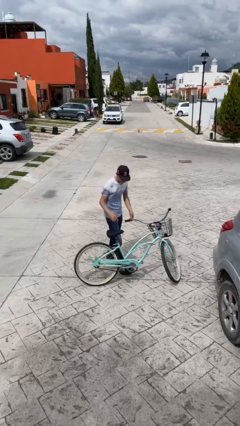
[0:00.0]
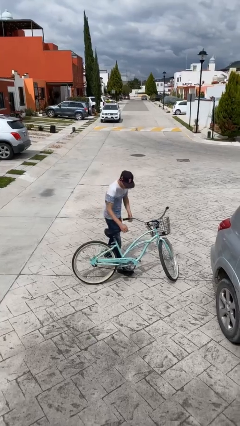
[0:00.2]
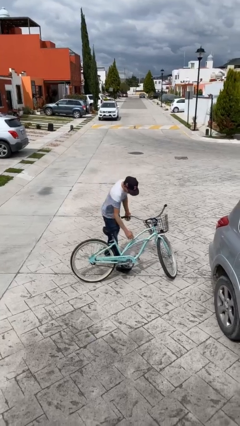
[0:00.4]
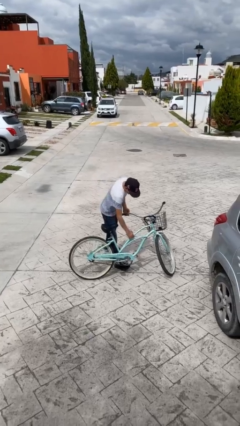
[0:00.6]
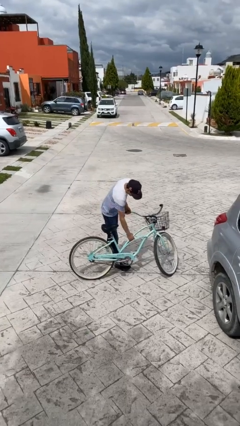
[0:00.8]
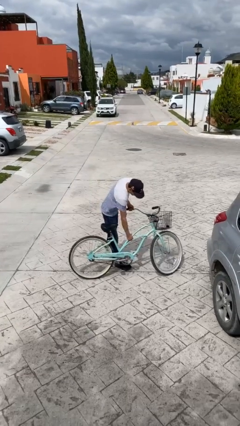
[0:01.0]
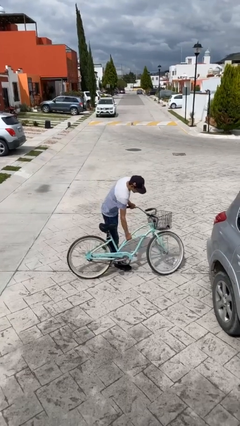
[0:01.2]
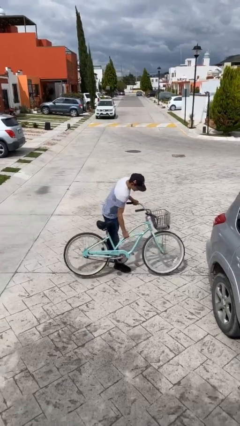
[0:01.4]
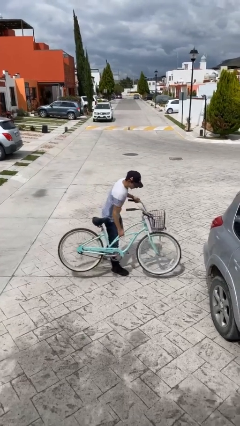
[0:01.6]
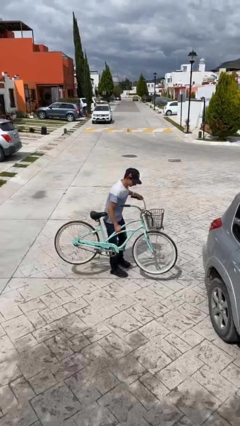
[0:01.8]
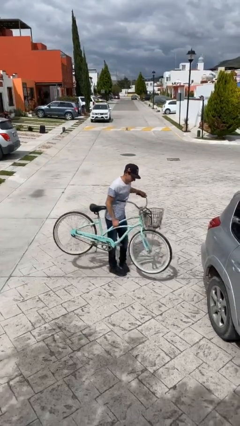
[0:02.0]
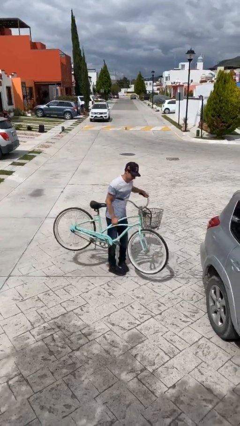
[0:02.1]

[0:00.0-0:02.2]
person picks up object from floor

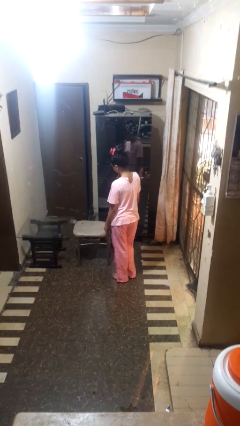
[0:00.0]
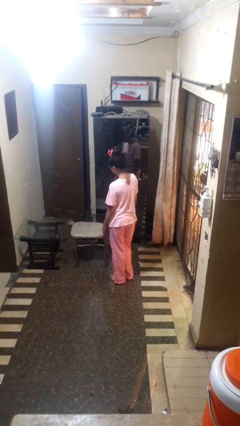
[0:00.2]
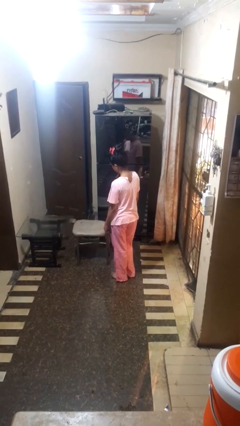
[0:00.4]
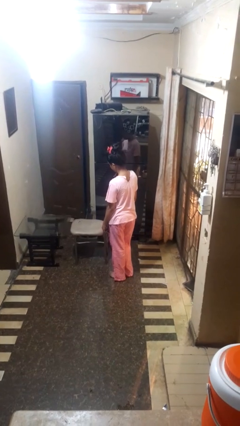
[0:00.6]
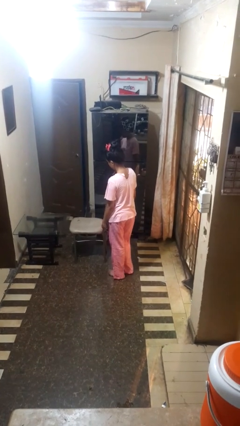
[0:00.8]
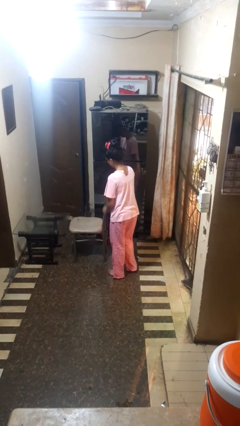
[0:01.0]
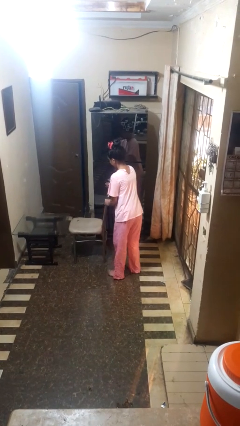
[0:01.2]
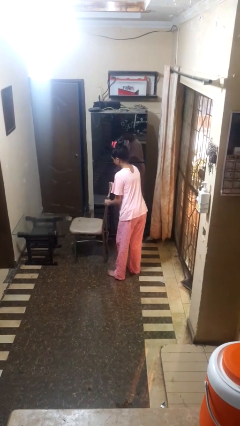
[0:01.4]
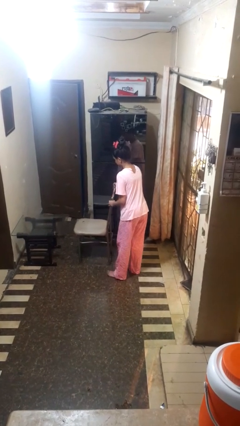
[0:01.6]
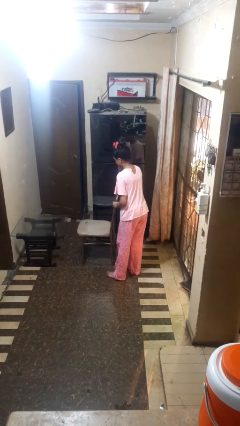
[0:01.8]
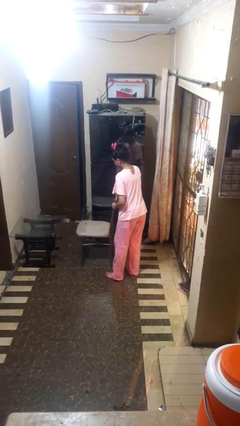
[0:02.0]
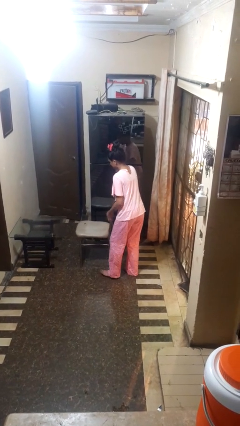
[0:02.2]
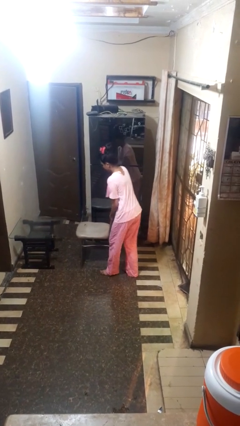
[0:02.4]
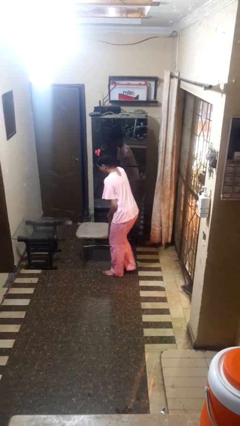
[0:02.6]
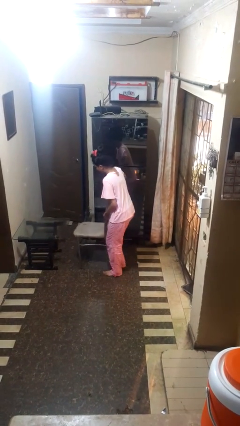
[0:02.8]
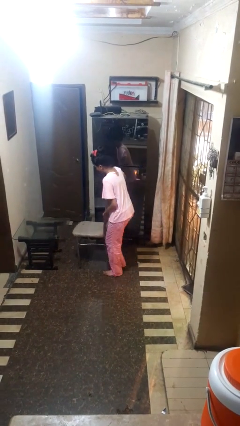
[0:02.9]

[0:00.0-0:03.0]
person pulls out chair

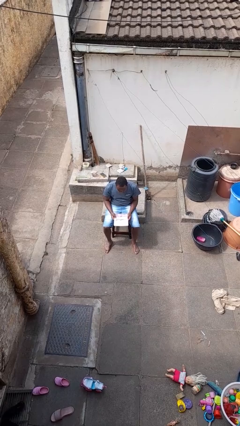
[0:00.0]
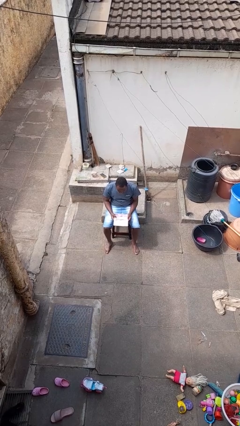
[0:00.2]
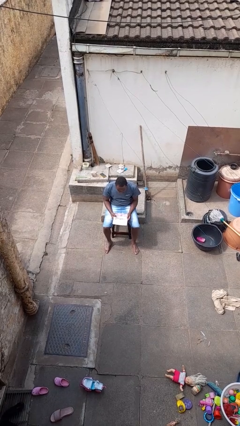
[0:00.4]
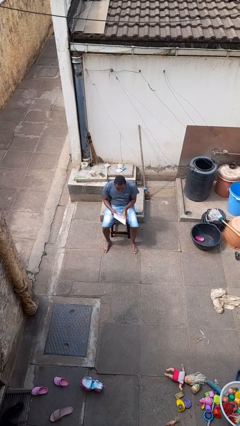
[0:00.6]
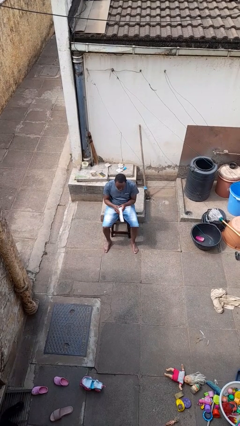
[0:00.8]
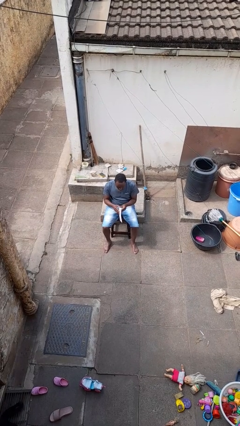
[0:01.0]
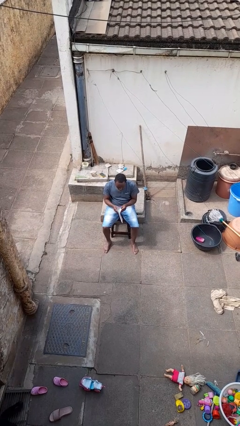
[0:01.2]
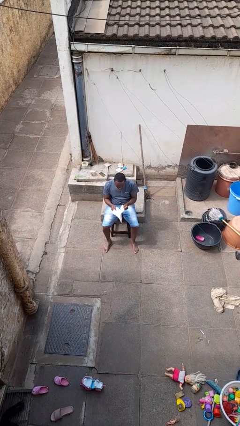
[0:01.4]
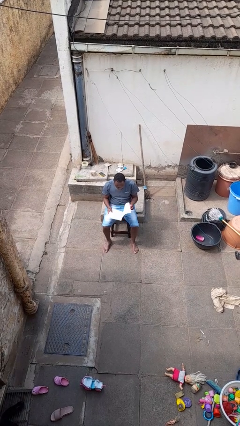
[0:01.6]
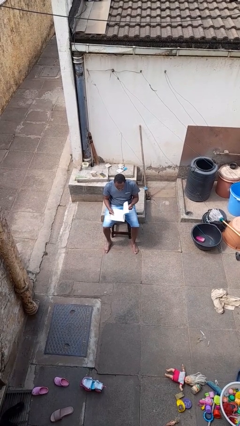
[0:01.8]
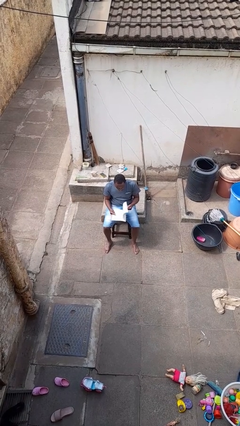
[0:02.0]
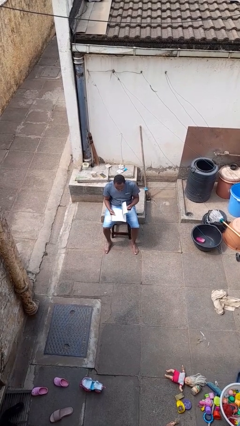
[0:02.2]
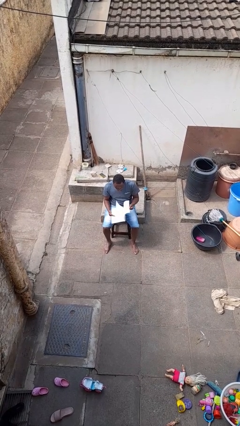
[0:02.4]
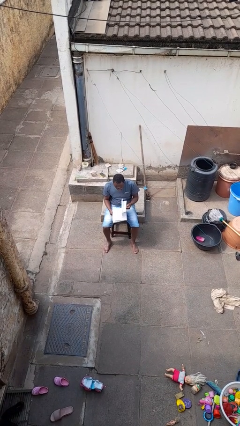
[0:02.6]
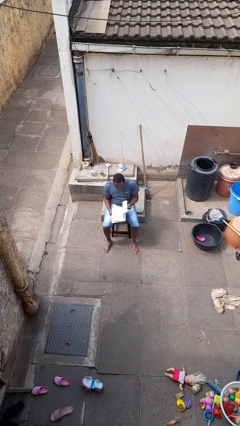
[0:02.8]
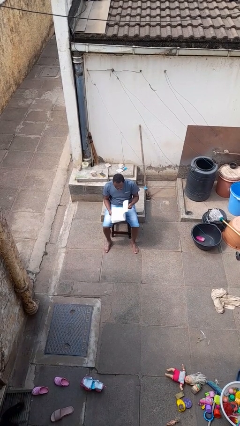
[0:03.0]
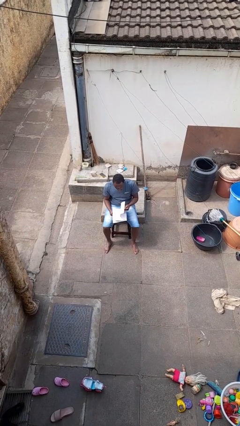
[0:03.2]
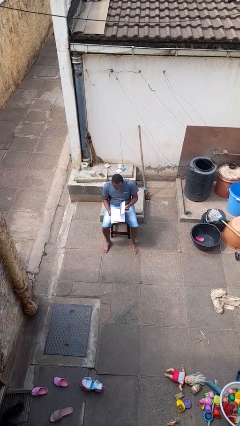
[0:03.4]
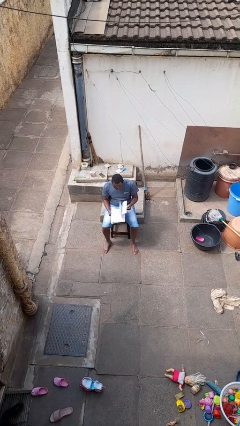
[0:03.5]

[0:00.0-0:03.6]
person reads magazine

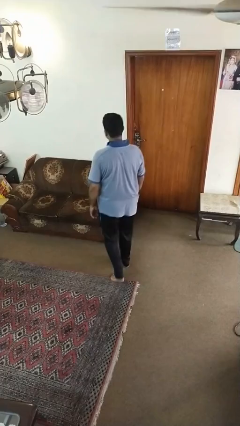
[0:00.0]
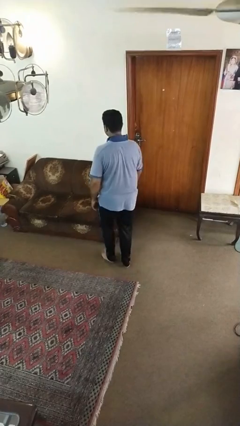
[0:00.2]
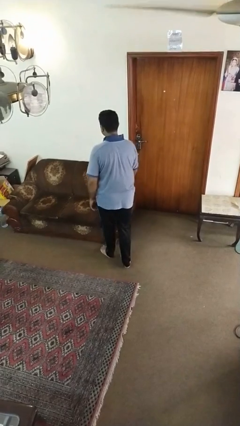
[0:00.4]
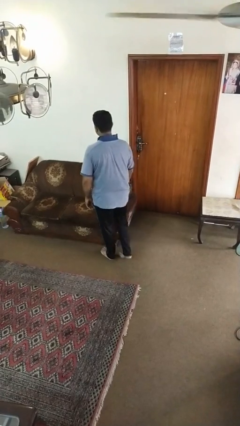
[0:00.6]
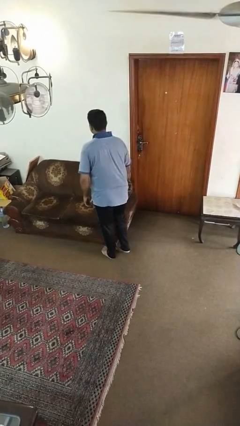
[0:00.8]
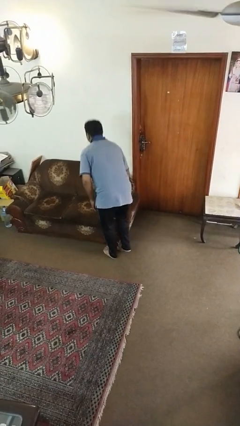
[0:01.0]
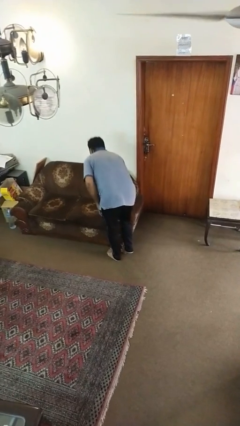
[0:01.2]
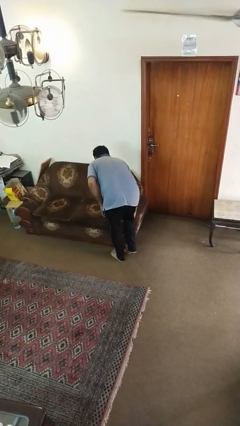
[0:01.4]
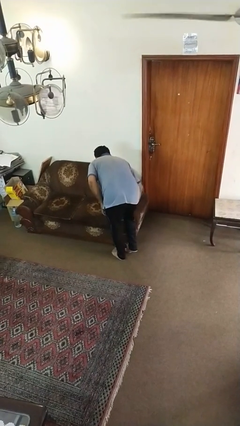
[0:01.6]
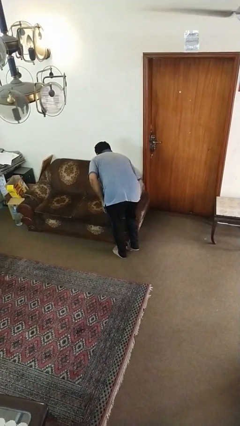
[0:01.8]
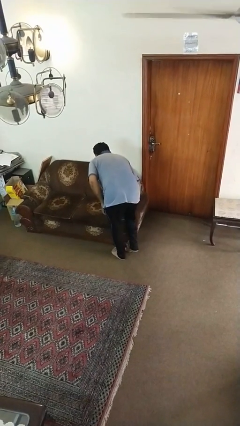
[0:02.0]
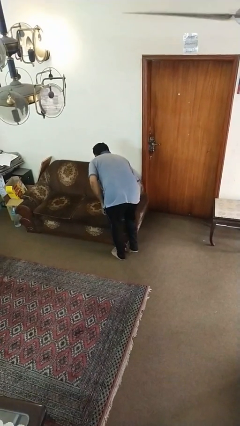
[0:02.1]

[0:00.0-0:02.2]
person stubs toe

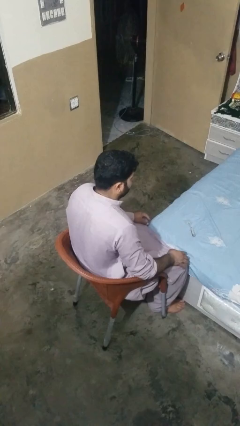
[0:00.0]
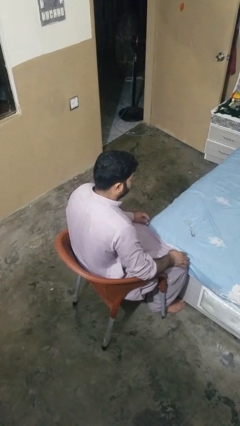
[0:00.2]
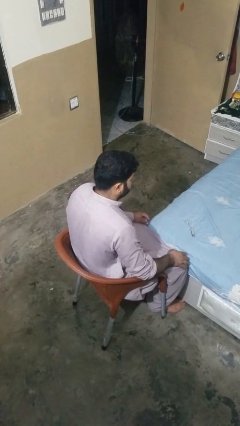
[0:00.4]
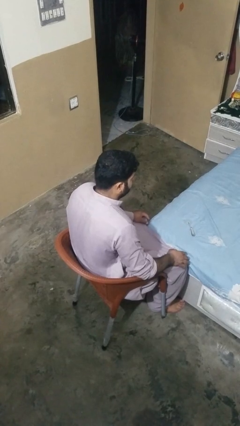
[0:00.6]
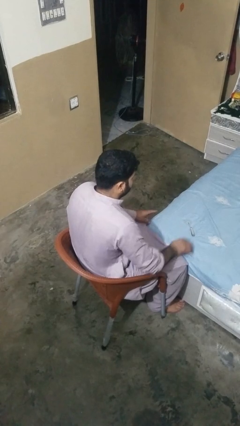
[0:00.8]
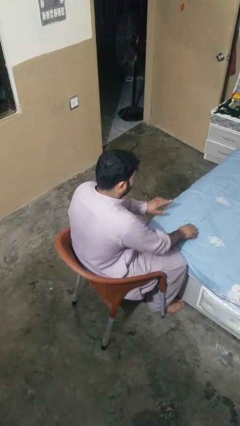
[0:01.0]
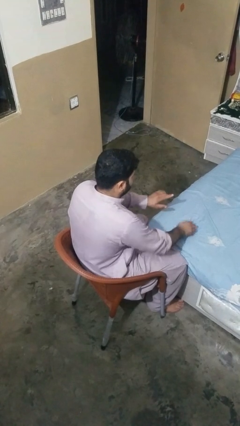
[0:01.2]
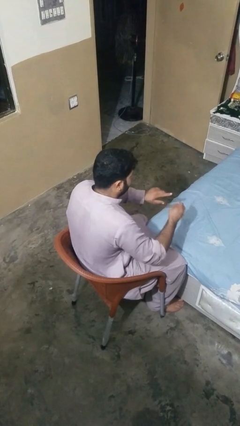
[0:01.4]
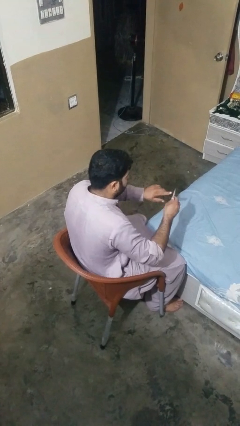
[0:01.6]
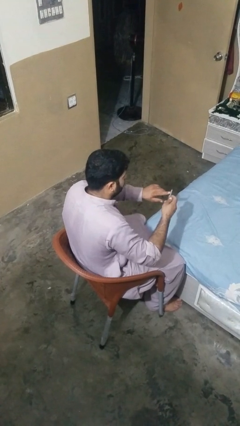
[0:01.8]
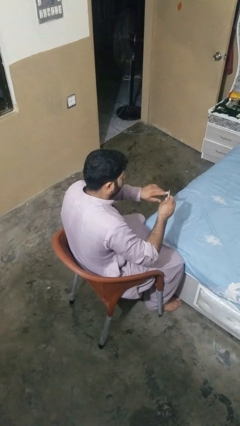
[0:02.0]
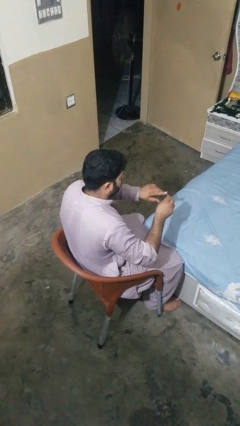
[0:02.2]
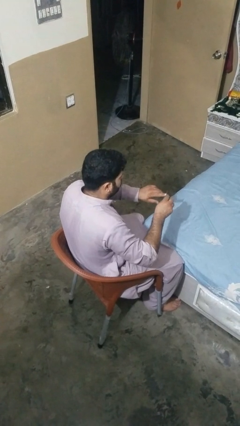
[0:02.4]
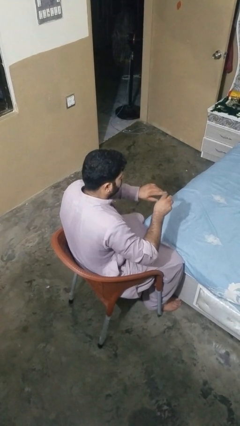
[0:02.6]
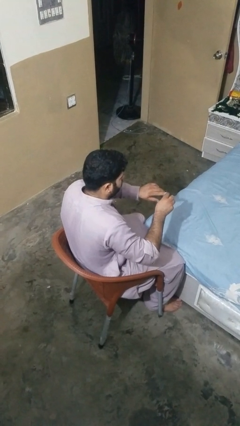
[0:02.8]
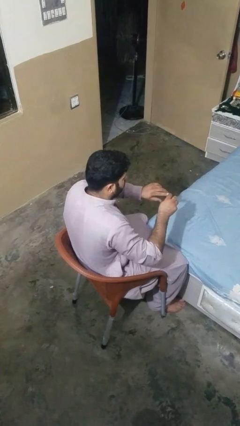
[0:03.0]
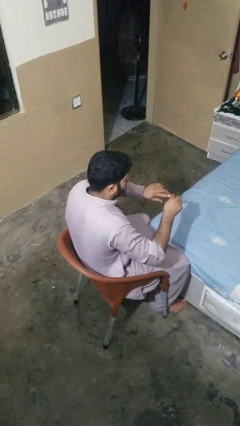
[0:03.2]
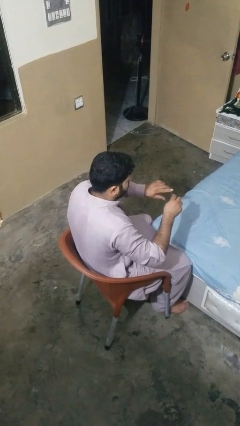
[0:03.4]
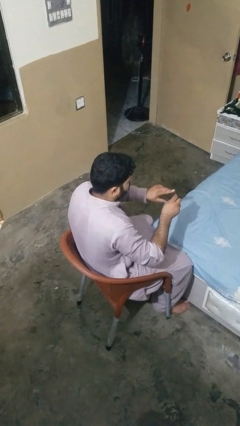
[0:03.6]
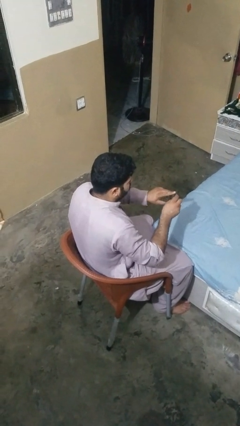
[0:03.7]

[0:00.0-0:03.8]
person files fingernails

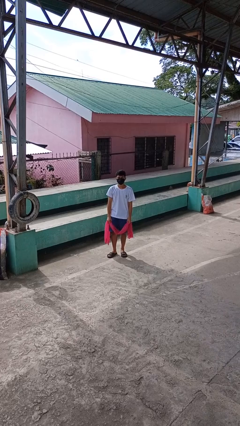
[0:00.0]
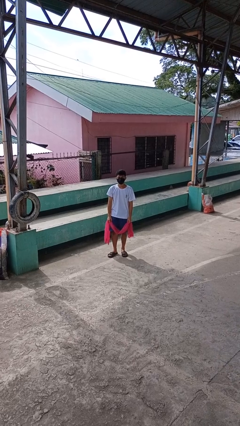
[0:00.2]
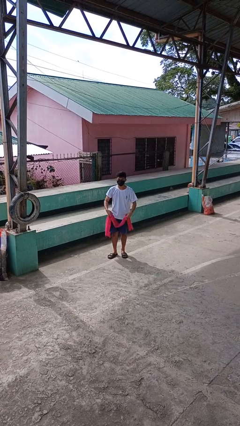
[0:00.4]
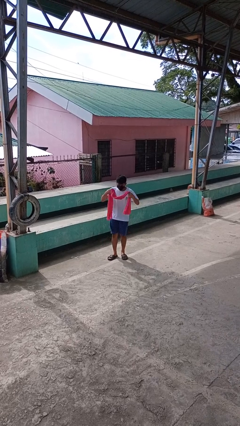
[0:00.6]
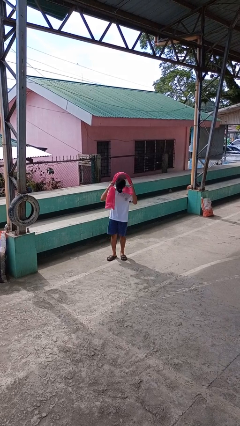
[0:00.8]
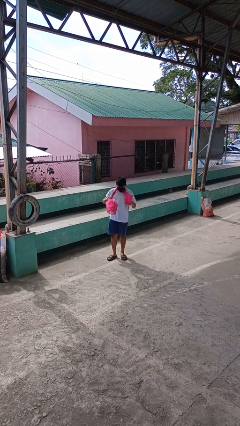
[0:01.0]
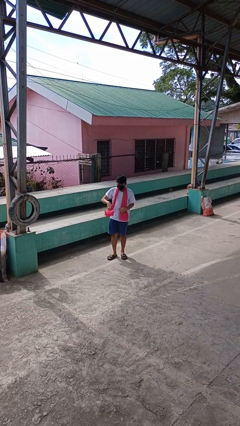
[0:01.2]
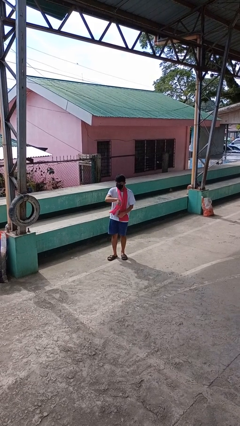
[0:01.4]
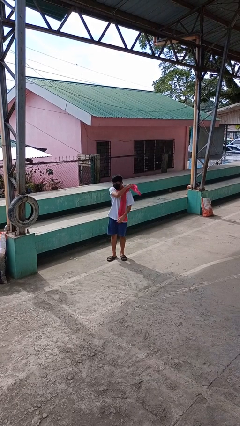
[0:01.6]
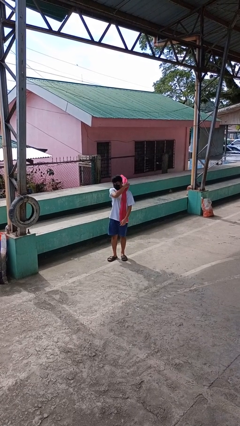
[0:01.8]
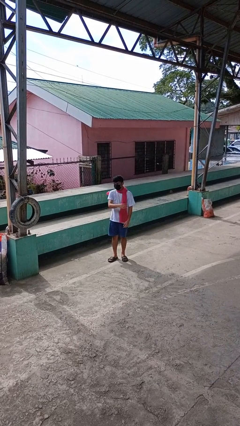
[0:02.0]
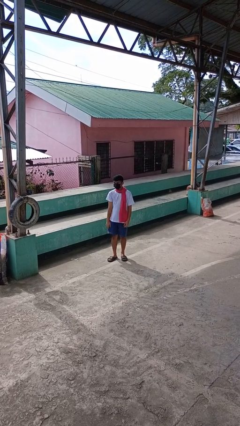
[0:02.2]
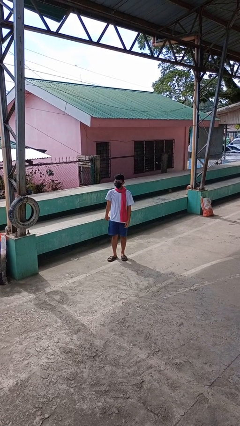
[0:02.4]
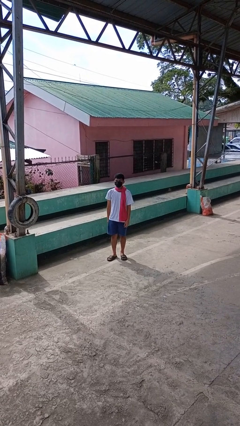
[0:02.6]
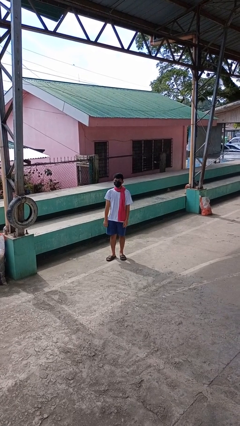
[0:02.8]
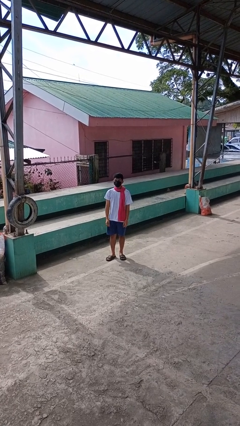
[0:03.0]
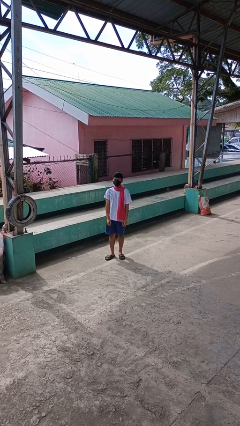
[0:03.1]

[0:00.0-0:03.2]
person puts on scarf
